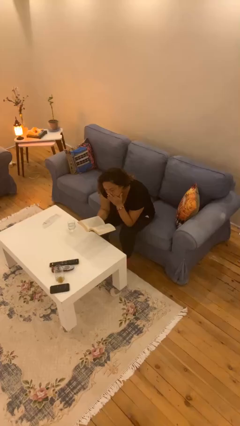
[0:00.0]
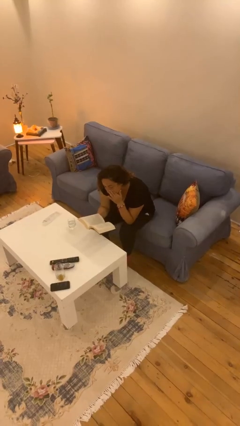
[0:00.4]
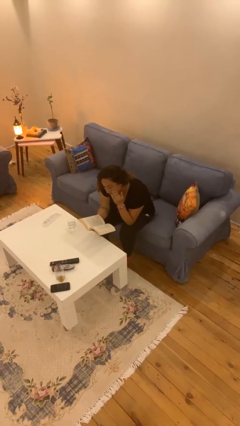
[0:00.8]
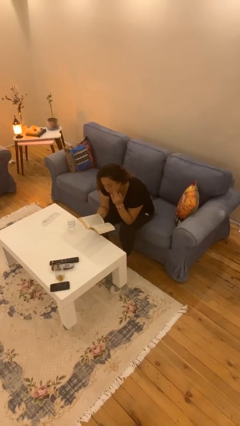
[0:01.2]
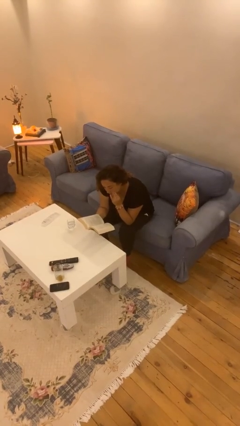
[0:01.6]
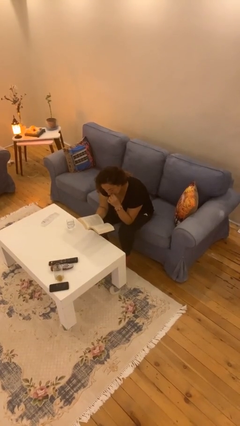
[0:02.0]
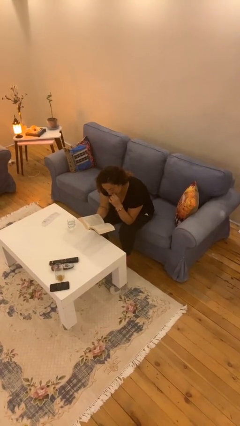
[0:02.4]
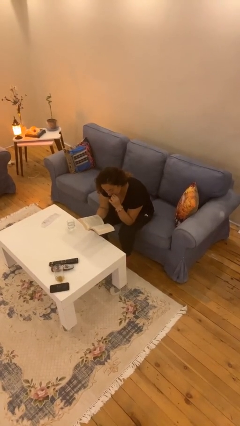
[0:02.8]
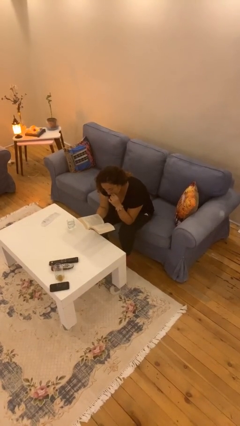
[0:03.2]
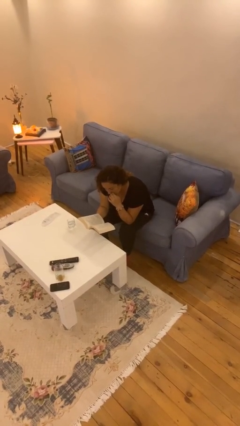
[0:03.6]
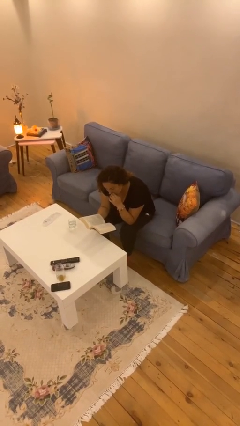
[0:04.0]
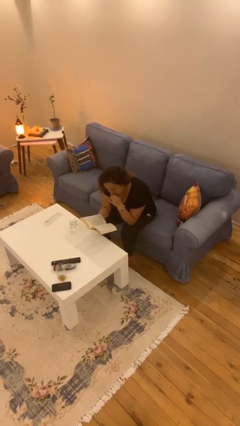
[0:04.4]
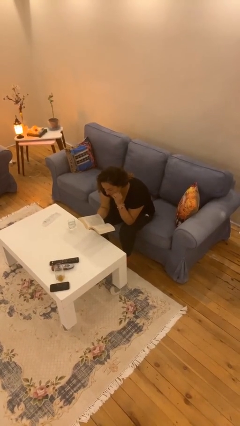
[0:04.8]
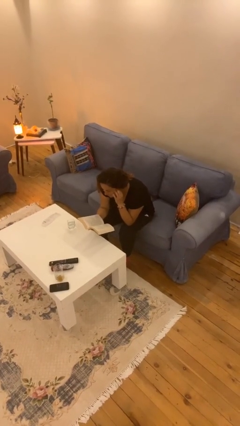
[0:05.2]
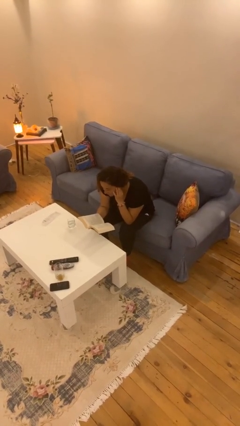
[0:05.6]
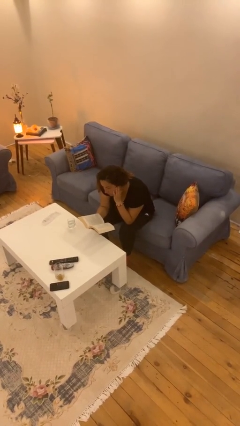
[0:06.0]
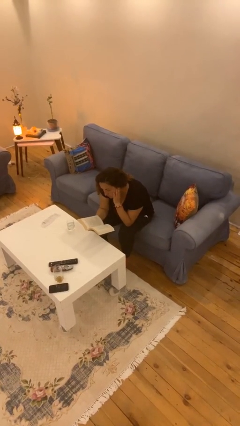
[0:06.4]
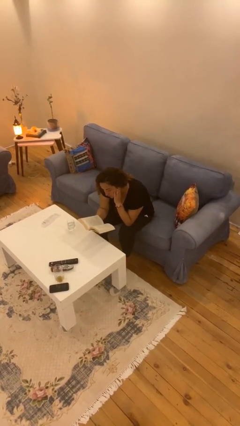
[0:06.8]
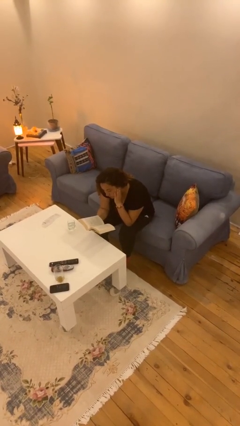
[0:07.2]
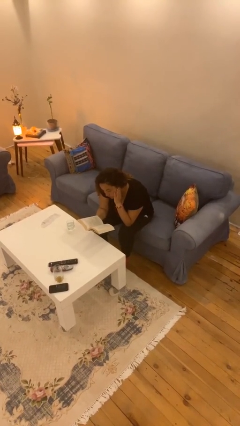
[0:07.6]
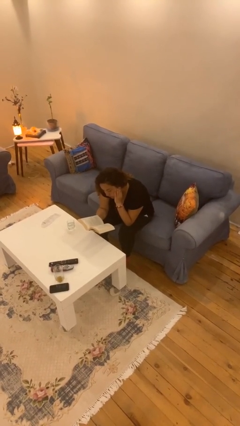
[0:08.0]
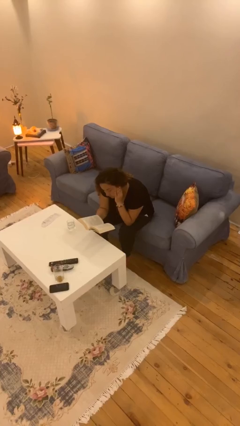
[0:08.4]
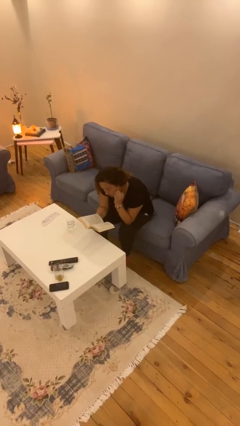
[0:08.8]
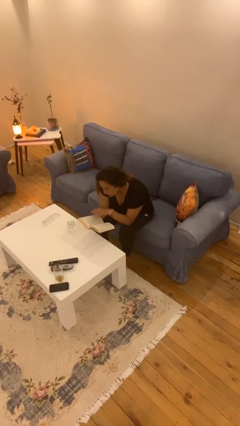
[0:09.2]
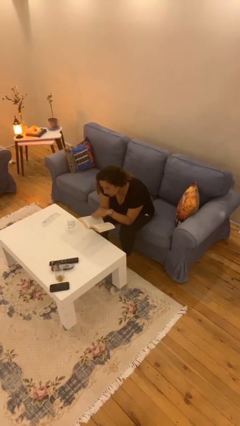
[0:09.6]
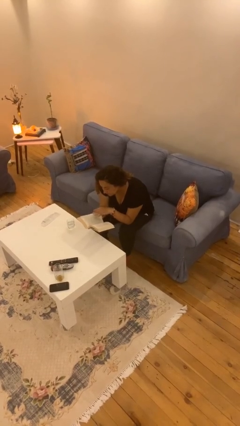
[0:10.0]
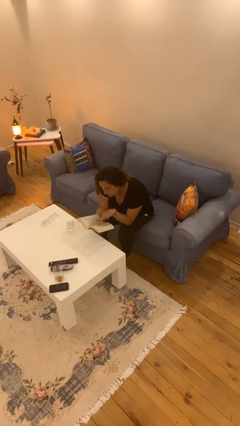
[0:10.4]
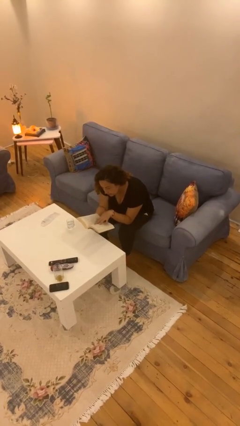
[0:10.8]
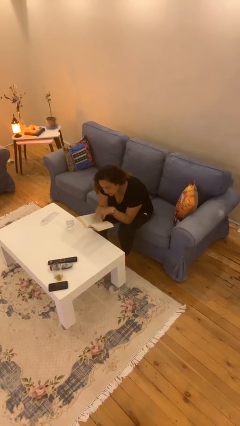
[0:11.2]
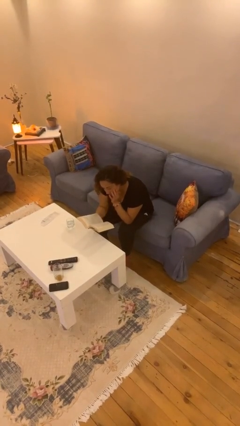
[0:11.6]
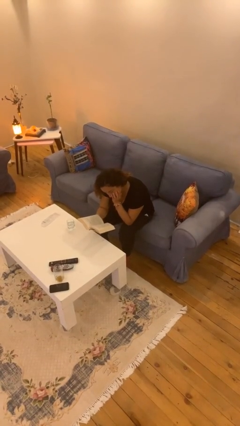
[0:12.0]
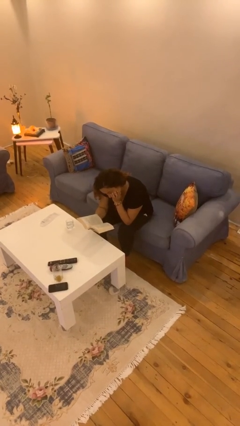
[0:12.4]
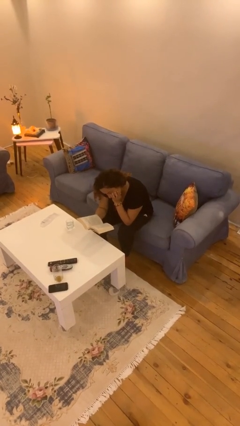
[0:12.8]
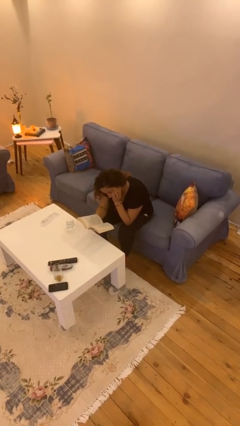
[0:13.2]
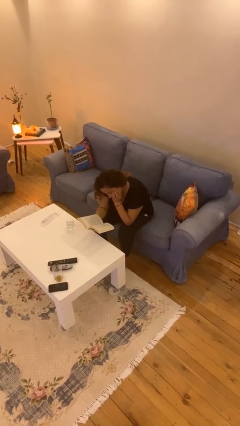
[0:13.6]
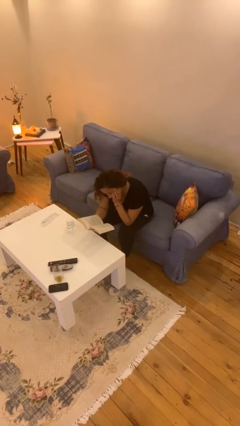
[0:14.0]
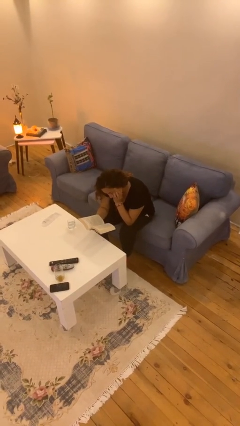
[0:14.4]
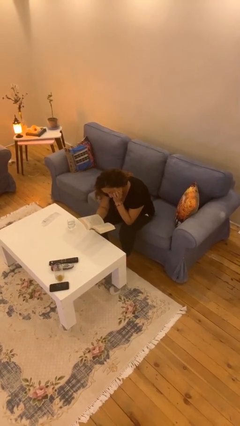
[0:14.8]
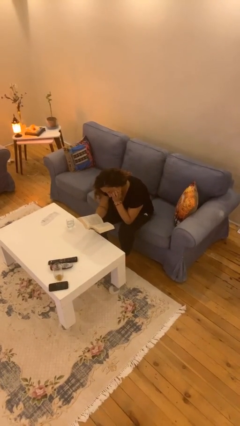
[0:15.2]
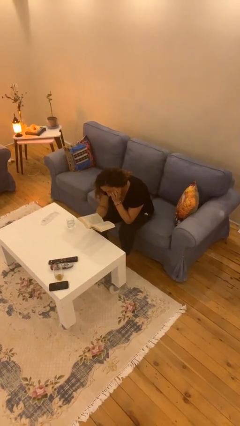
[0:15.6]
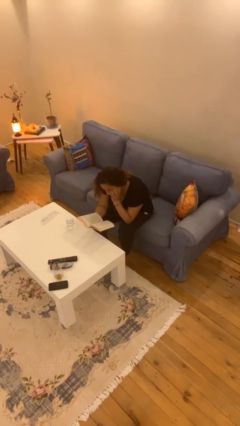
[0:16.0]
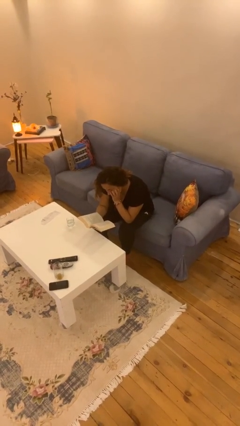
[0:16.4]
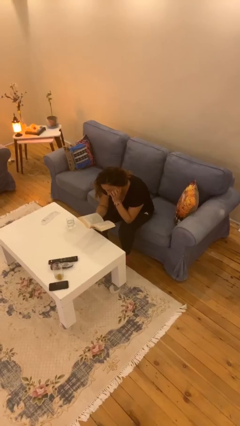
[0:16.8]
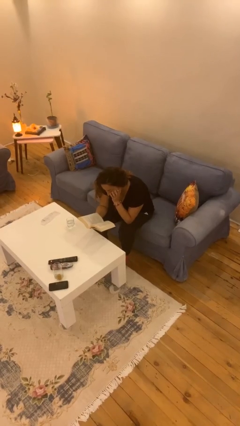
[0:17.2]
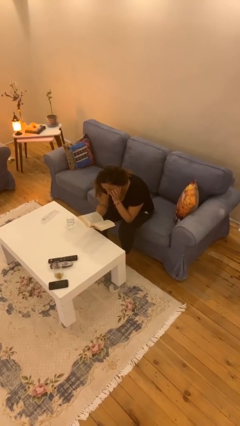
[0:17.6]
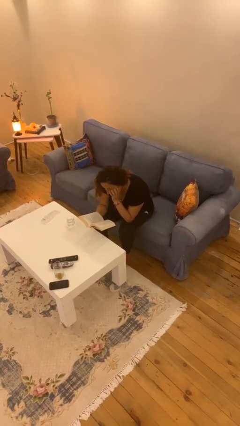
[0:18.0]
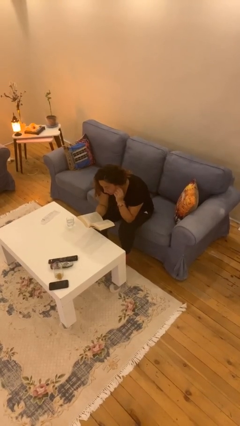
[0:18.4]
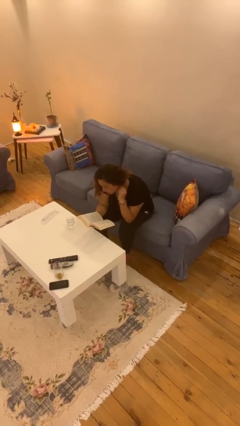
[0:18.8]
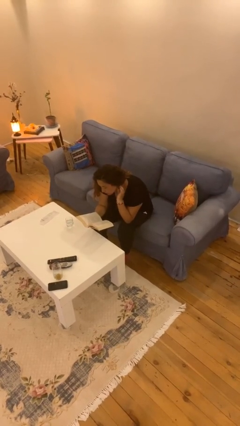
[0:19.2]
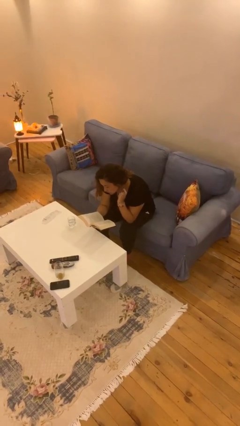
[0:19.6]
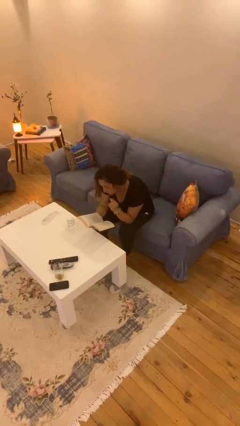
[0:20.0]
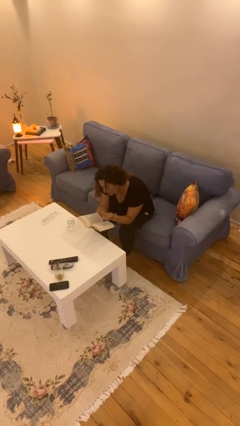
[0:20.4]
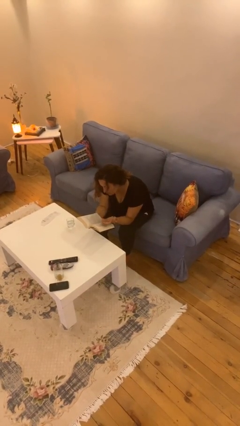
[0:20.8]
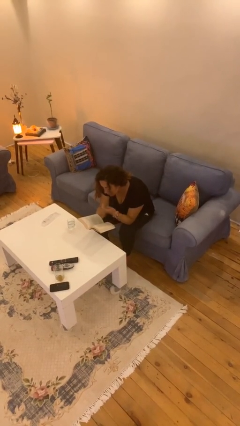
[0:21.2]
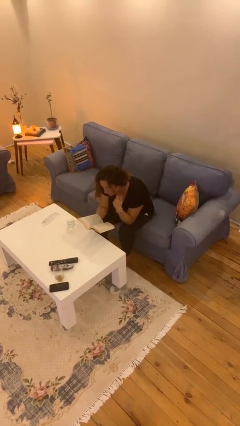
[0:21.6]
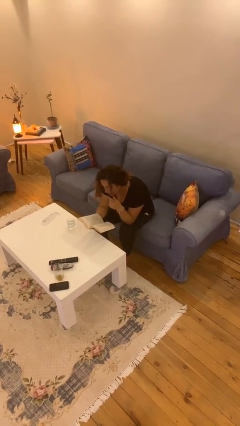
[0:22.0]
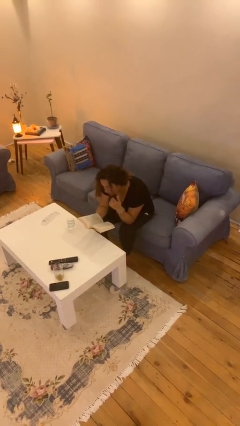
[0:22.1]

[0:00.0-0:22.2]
person reads document

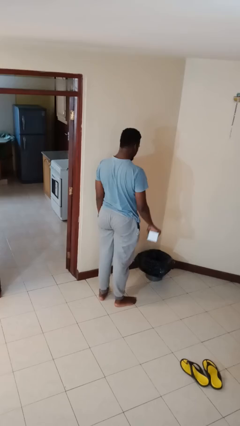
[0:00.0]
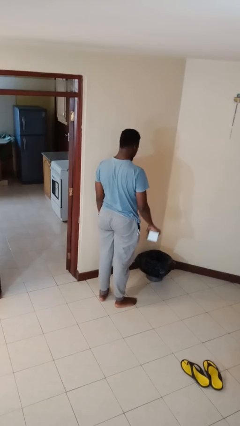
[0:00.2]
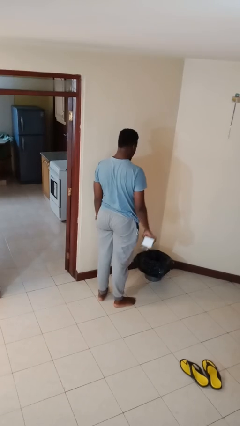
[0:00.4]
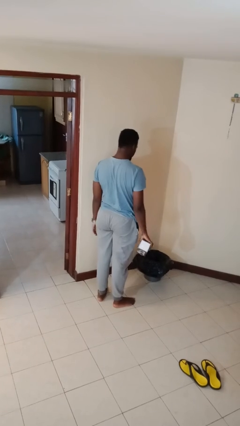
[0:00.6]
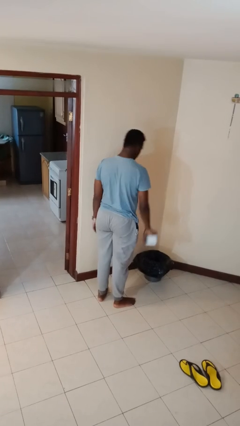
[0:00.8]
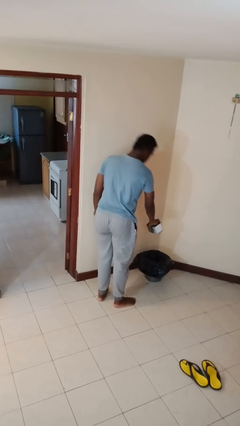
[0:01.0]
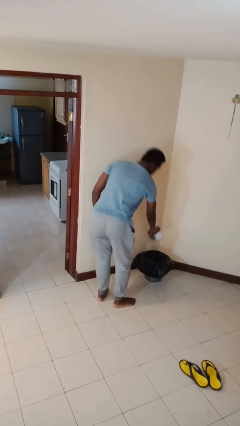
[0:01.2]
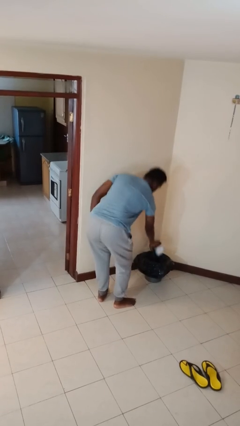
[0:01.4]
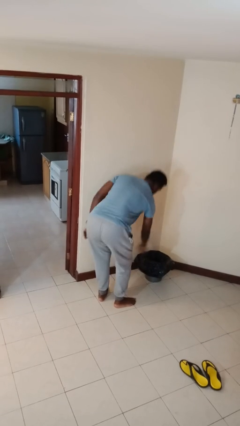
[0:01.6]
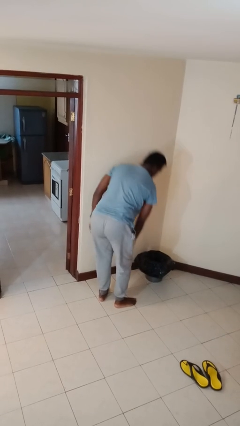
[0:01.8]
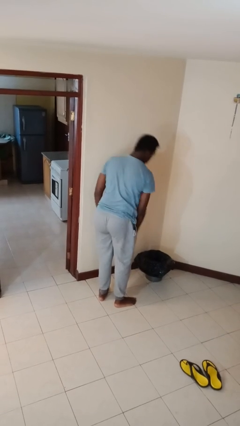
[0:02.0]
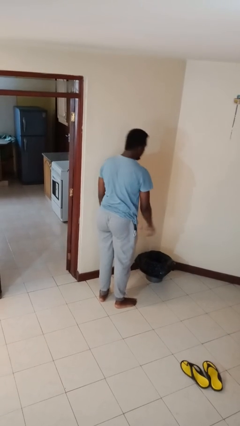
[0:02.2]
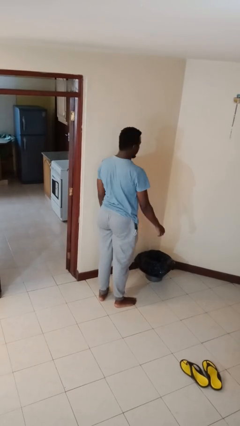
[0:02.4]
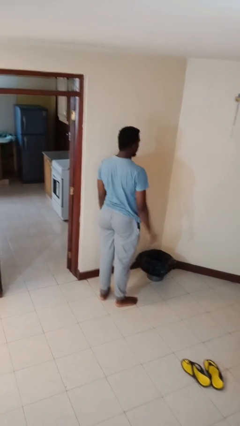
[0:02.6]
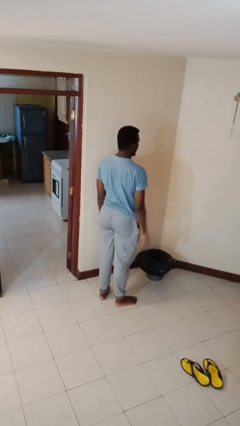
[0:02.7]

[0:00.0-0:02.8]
person discards trash

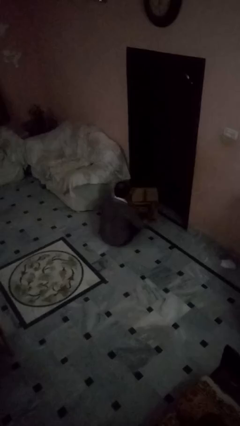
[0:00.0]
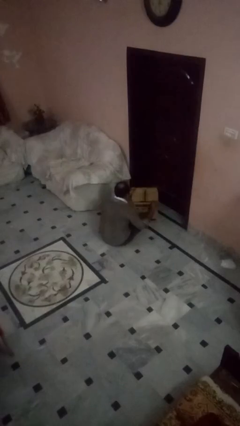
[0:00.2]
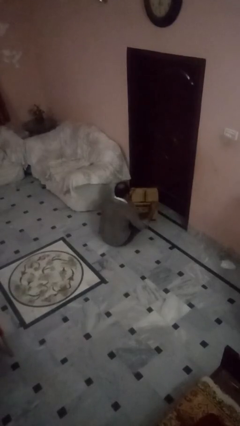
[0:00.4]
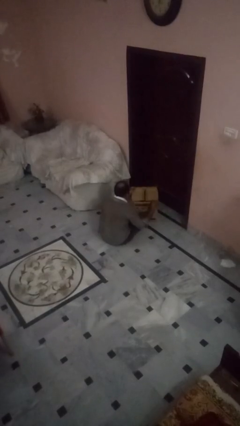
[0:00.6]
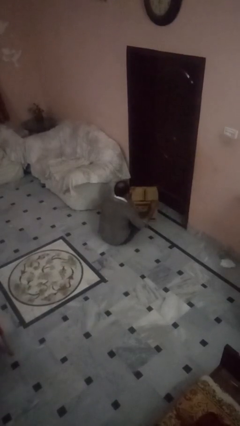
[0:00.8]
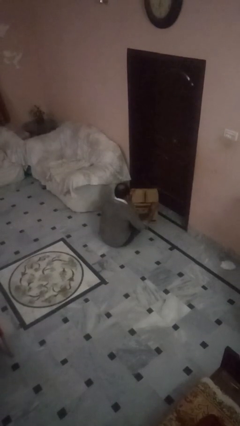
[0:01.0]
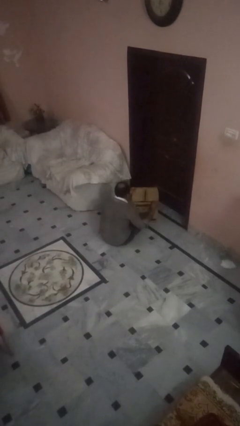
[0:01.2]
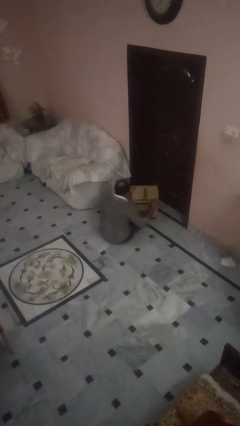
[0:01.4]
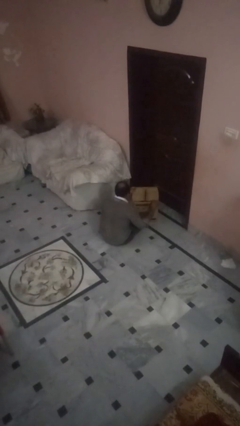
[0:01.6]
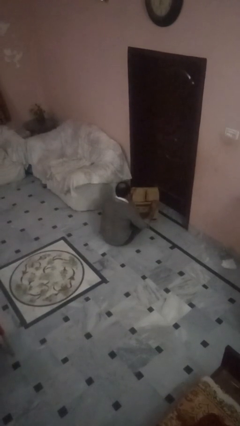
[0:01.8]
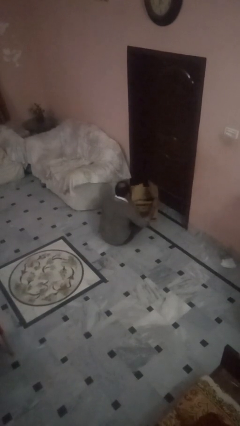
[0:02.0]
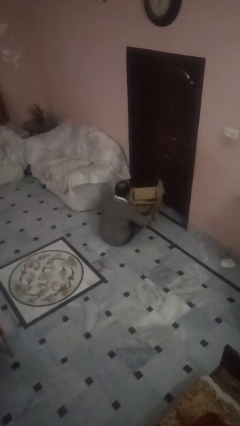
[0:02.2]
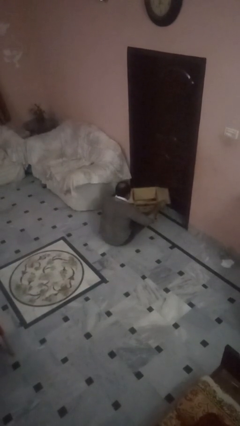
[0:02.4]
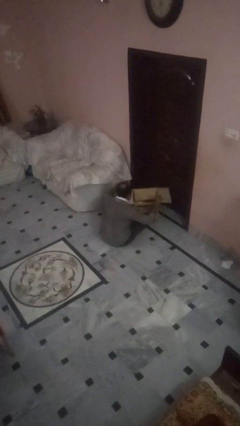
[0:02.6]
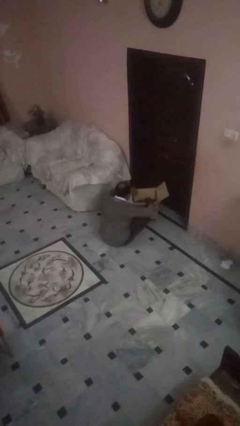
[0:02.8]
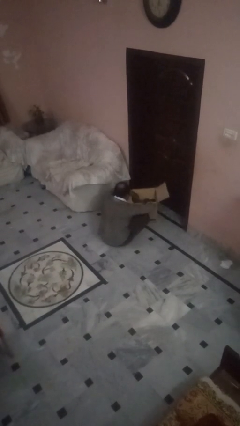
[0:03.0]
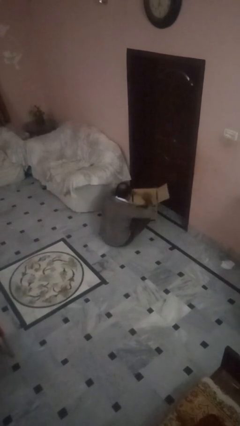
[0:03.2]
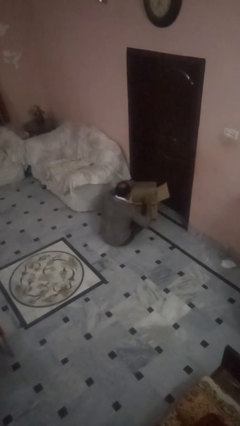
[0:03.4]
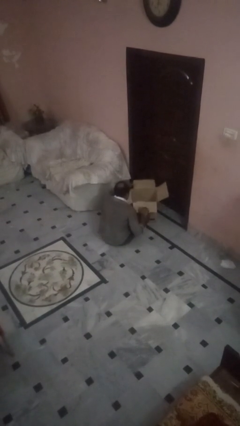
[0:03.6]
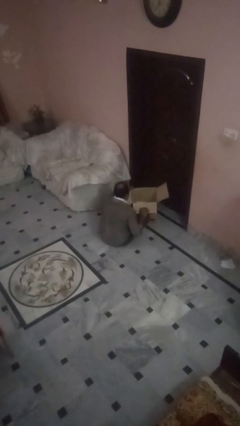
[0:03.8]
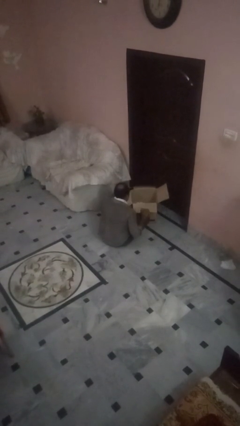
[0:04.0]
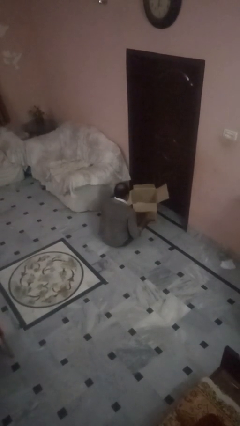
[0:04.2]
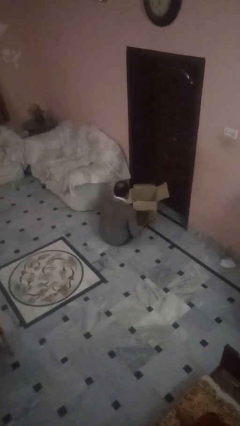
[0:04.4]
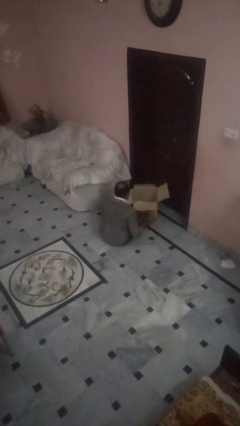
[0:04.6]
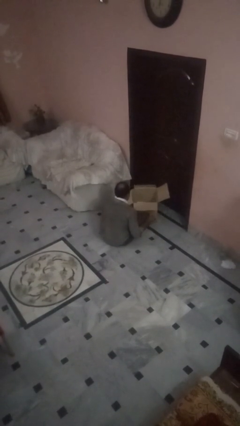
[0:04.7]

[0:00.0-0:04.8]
person opens box
